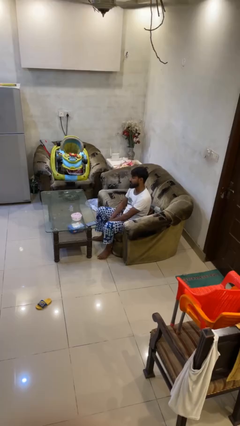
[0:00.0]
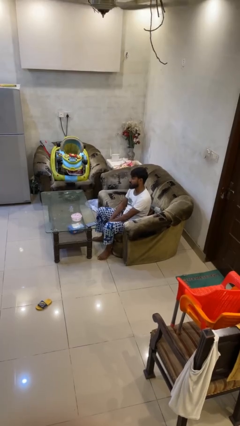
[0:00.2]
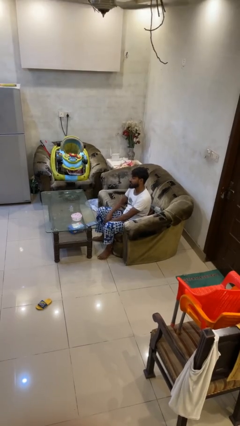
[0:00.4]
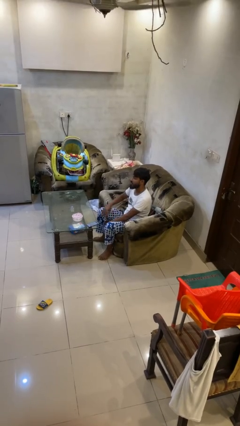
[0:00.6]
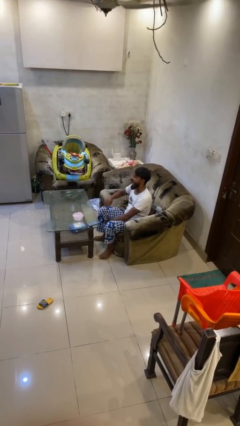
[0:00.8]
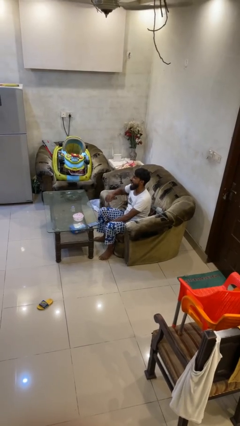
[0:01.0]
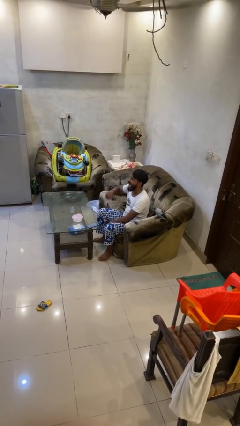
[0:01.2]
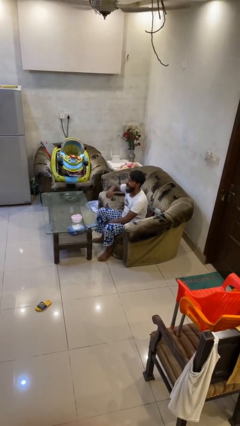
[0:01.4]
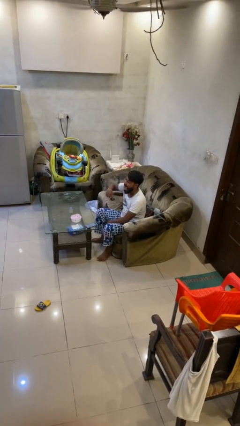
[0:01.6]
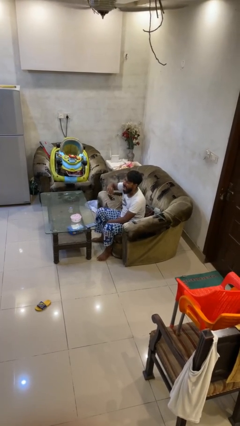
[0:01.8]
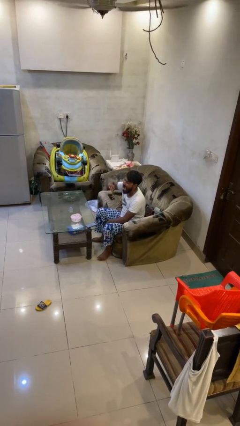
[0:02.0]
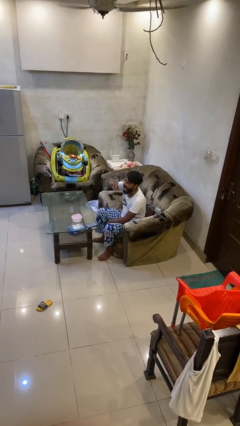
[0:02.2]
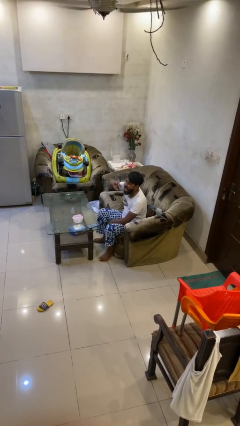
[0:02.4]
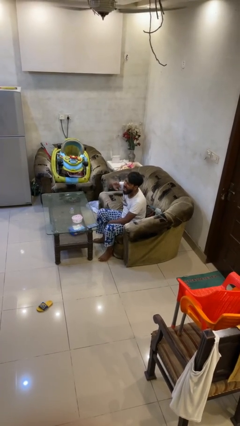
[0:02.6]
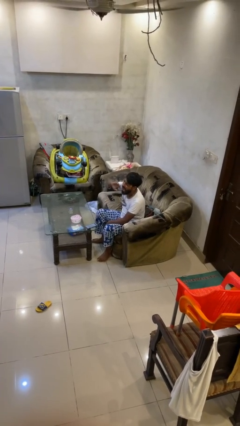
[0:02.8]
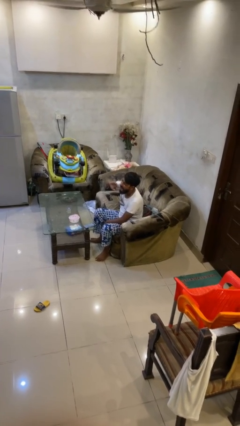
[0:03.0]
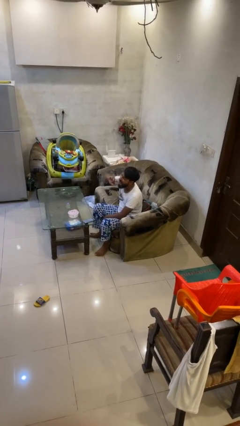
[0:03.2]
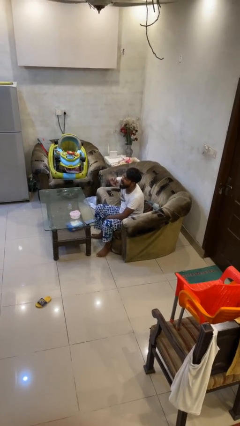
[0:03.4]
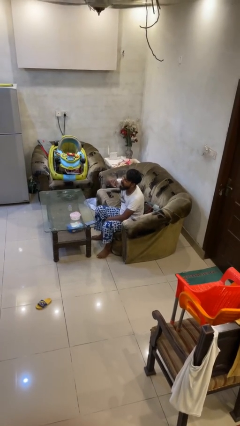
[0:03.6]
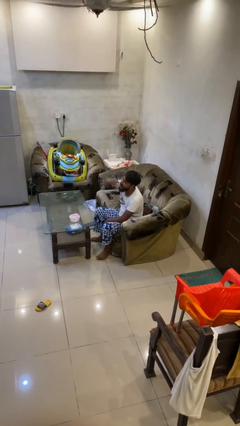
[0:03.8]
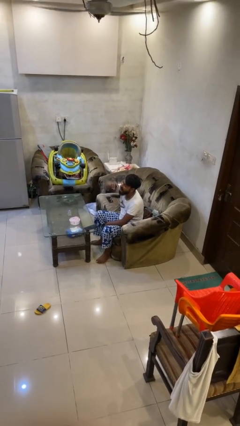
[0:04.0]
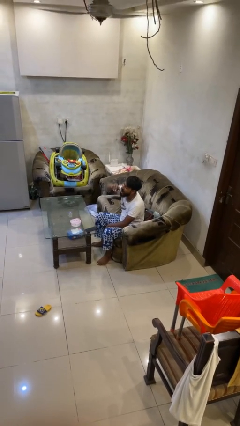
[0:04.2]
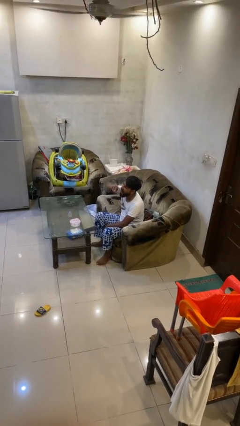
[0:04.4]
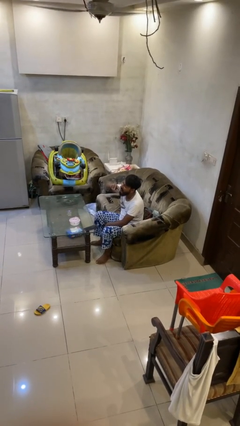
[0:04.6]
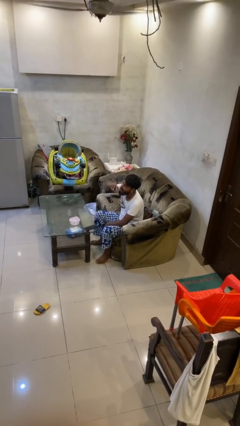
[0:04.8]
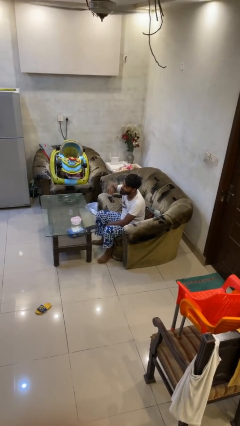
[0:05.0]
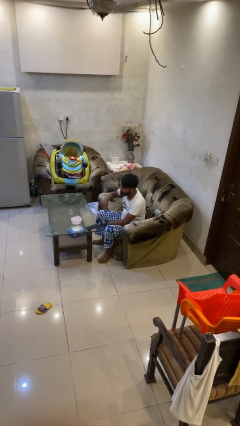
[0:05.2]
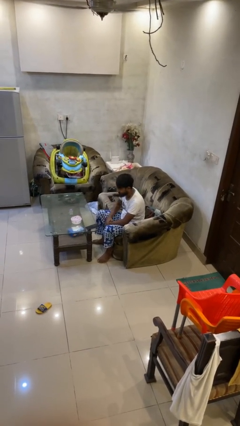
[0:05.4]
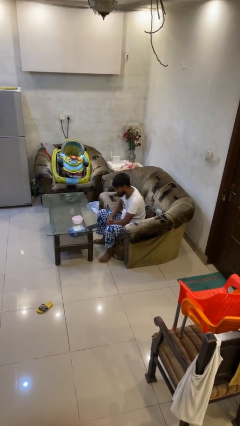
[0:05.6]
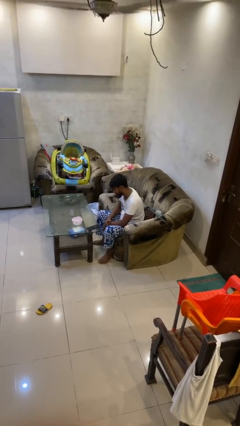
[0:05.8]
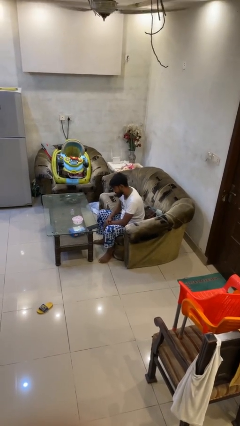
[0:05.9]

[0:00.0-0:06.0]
person yawns

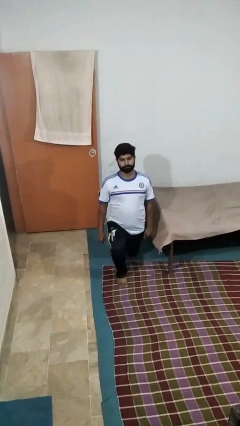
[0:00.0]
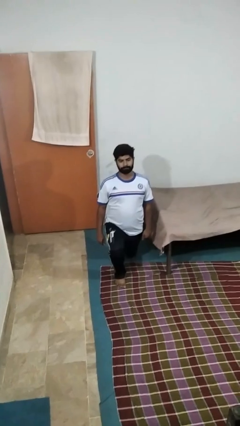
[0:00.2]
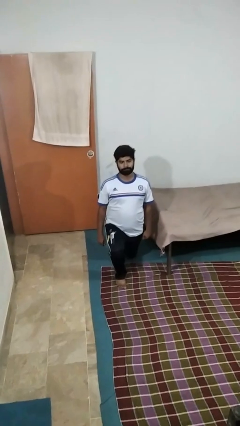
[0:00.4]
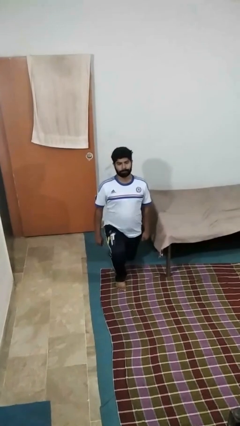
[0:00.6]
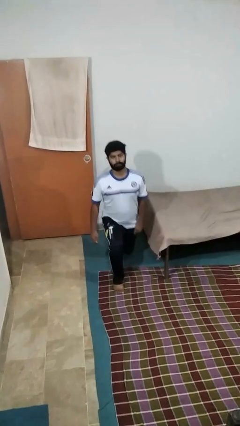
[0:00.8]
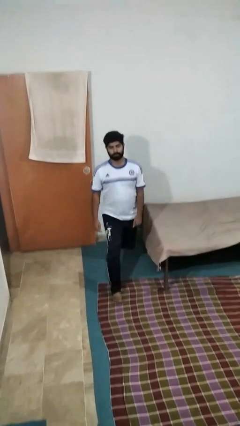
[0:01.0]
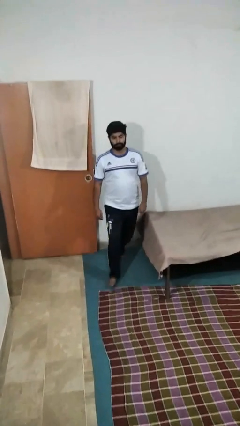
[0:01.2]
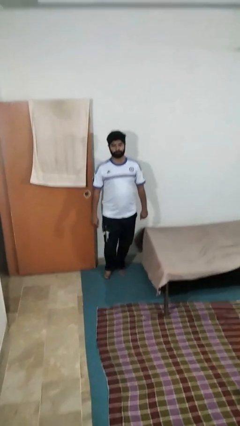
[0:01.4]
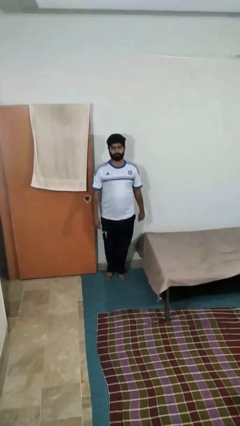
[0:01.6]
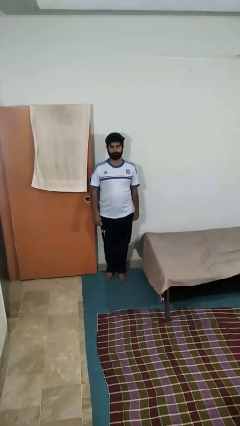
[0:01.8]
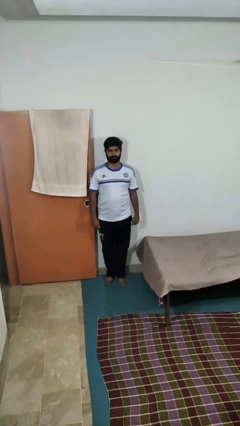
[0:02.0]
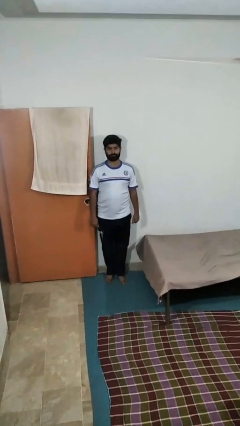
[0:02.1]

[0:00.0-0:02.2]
person stands up from floor

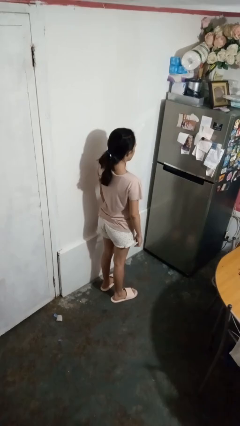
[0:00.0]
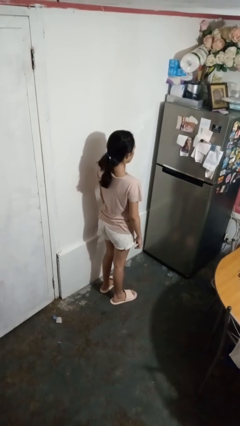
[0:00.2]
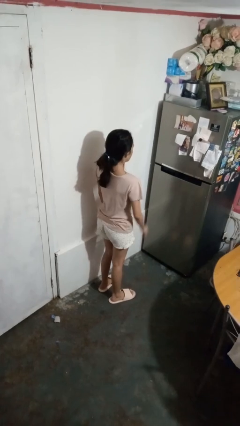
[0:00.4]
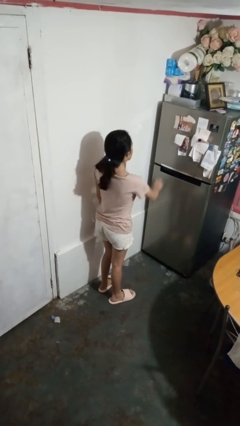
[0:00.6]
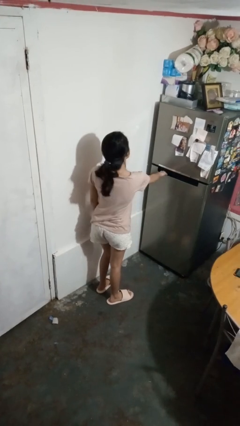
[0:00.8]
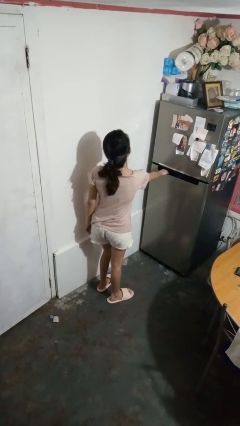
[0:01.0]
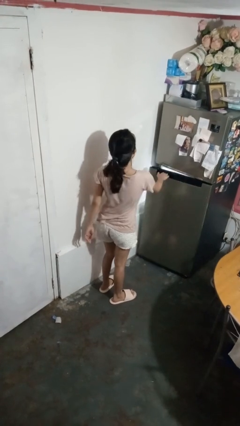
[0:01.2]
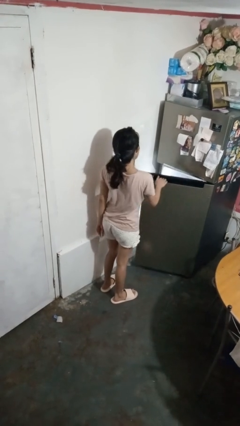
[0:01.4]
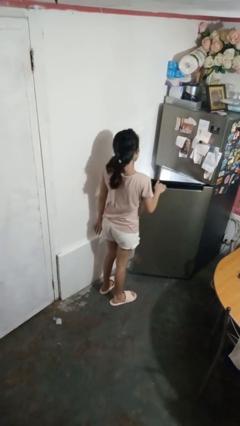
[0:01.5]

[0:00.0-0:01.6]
person opens refrigerator

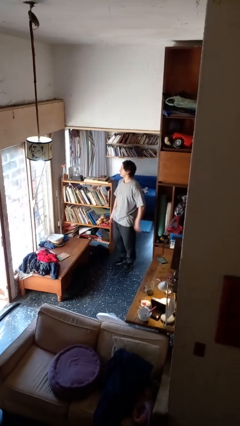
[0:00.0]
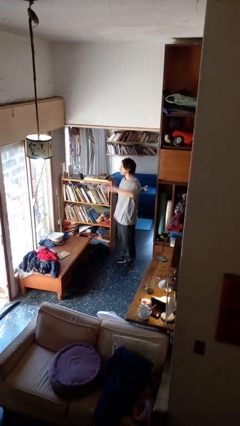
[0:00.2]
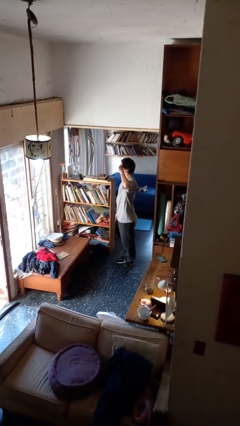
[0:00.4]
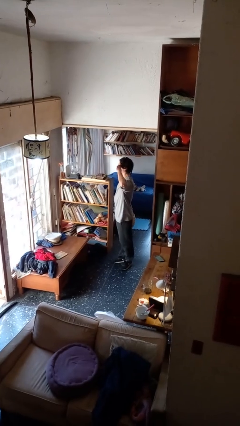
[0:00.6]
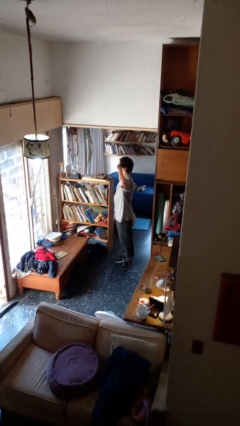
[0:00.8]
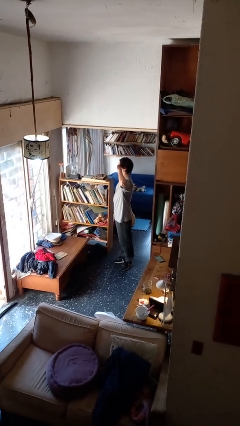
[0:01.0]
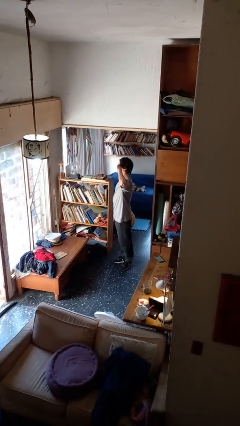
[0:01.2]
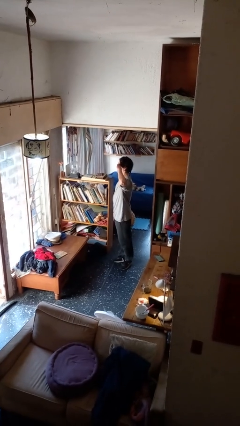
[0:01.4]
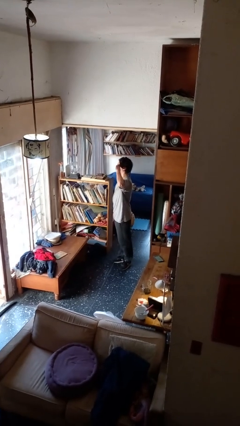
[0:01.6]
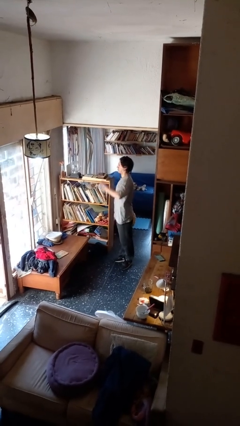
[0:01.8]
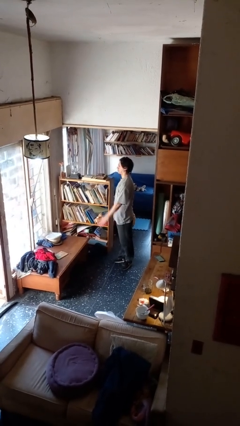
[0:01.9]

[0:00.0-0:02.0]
person salutes

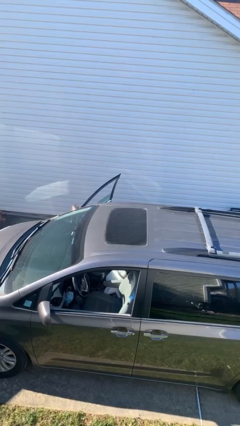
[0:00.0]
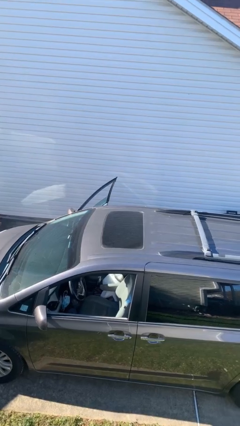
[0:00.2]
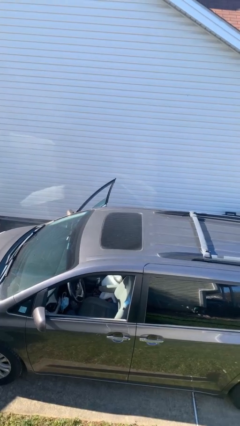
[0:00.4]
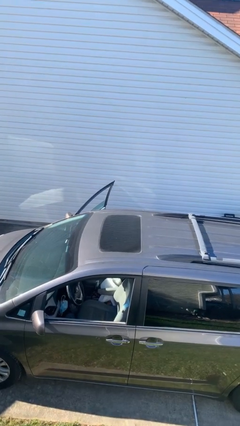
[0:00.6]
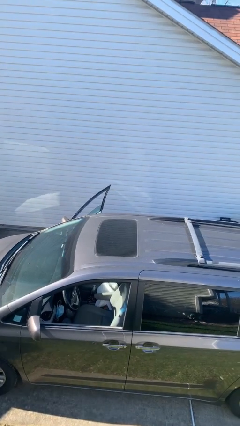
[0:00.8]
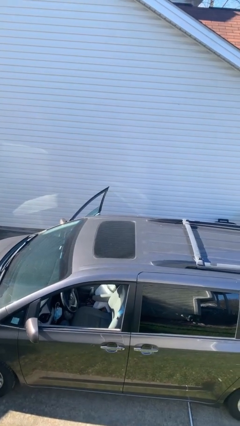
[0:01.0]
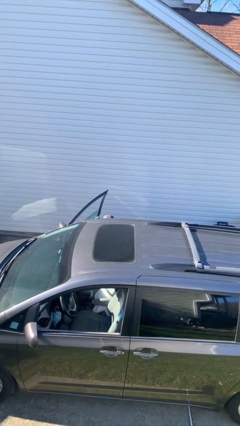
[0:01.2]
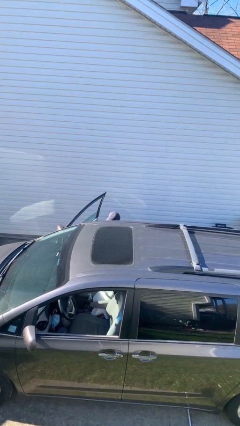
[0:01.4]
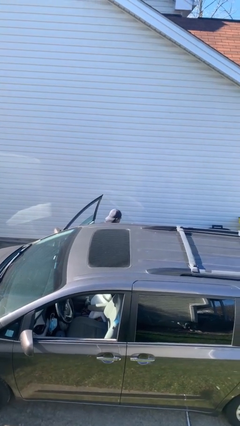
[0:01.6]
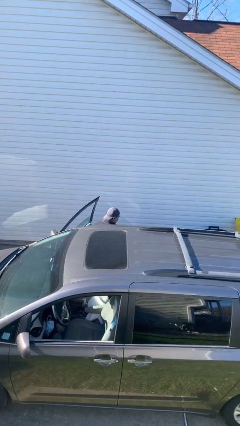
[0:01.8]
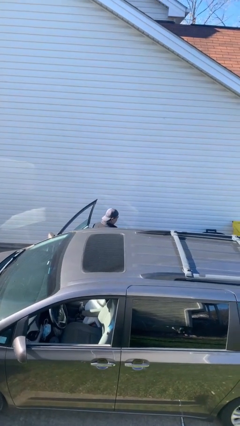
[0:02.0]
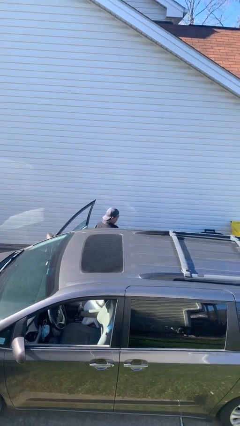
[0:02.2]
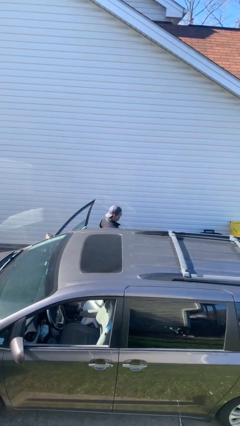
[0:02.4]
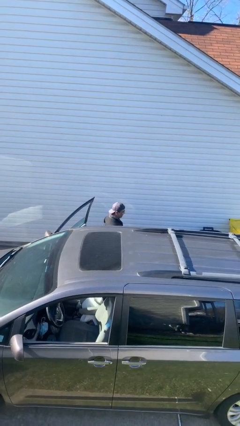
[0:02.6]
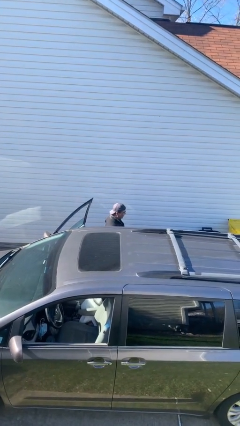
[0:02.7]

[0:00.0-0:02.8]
person exits car

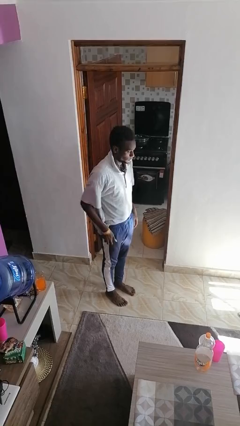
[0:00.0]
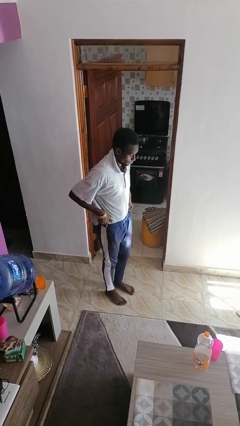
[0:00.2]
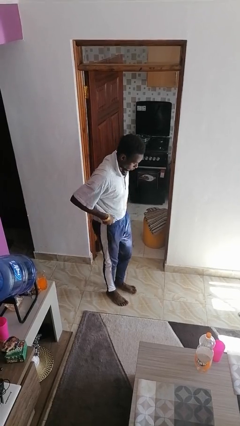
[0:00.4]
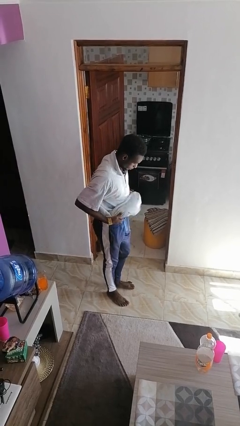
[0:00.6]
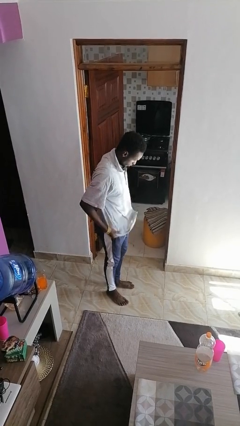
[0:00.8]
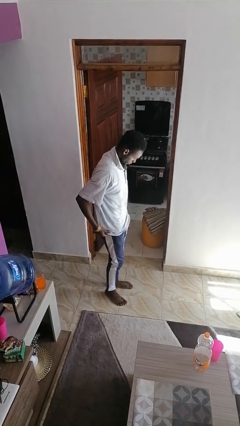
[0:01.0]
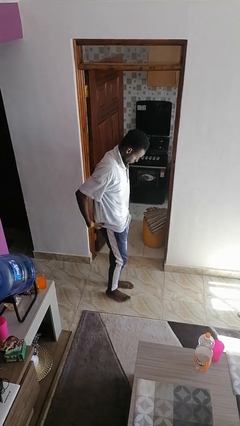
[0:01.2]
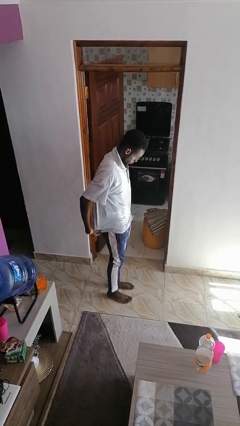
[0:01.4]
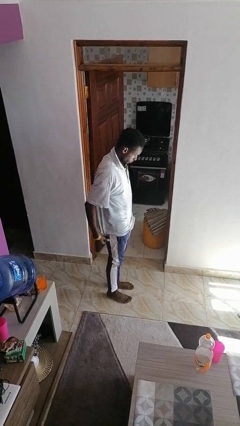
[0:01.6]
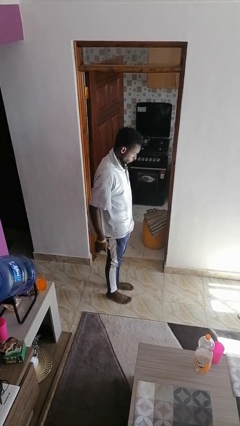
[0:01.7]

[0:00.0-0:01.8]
person untucks shirt

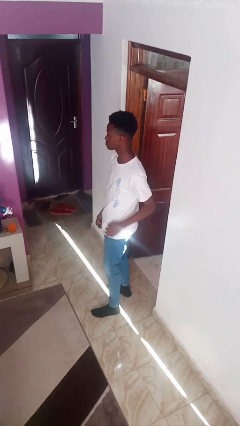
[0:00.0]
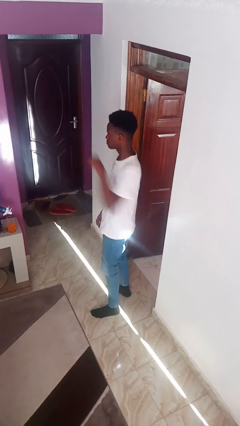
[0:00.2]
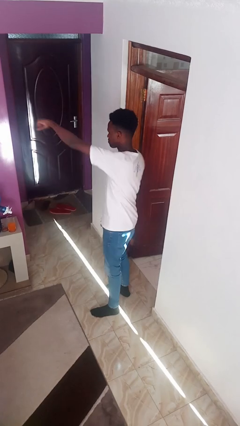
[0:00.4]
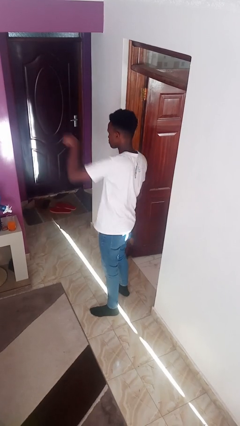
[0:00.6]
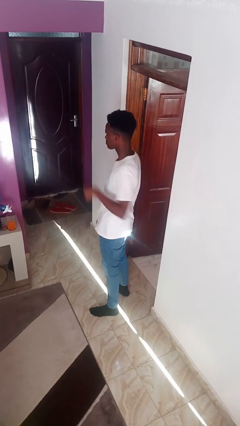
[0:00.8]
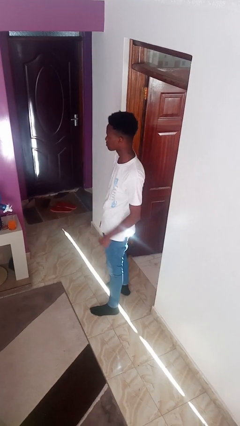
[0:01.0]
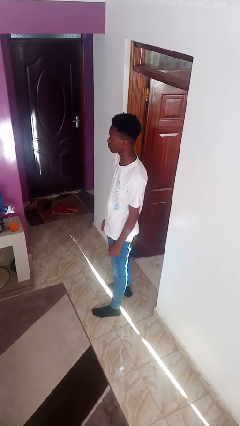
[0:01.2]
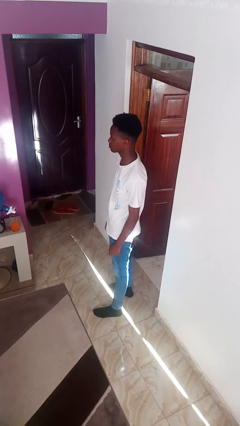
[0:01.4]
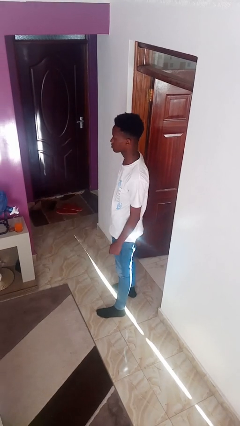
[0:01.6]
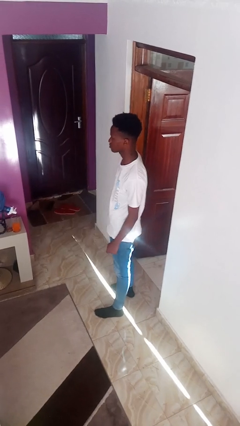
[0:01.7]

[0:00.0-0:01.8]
person punches
